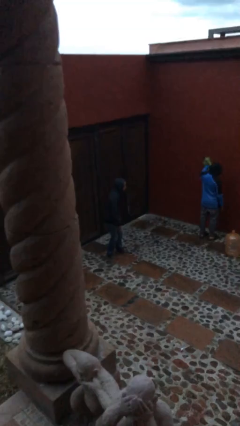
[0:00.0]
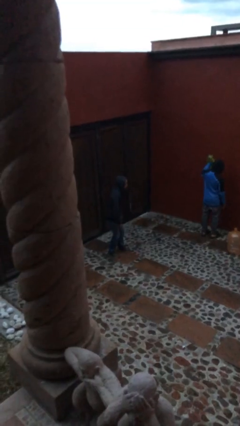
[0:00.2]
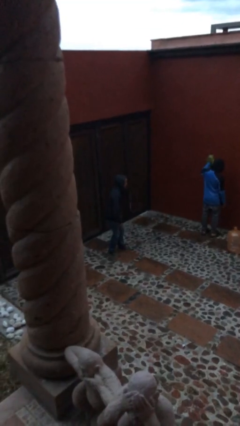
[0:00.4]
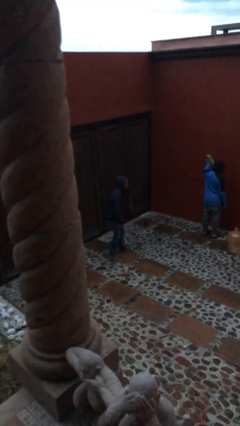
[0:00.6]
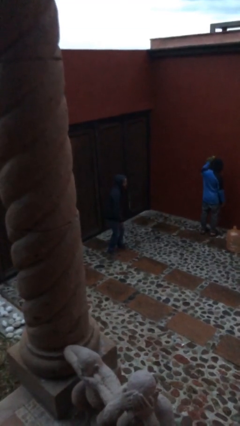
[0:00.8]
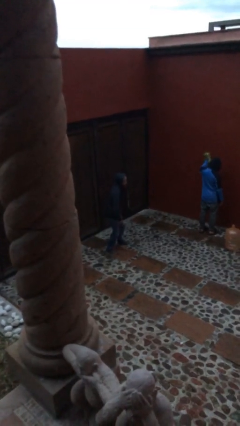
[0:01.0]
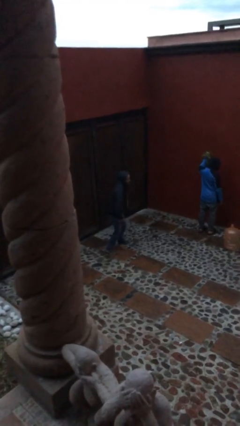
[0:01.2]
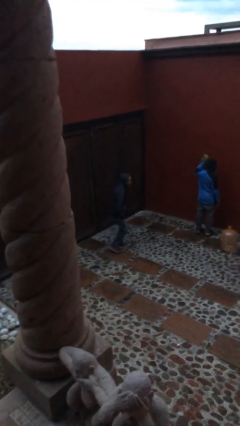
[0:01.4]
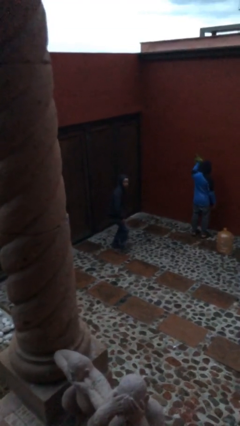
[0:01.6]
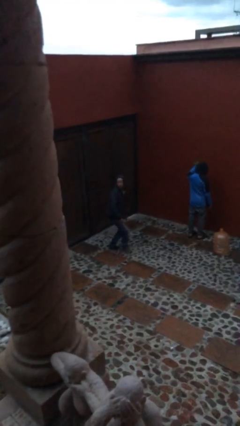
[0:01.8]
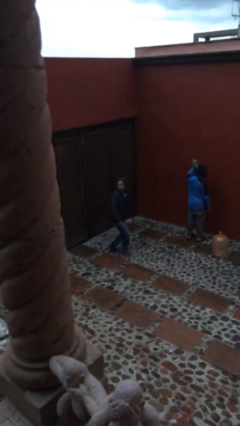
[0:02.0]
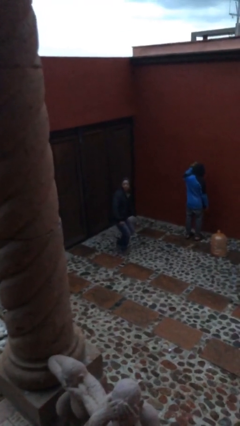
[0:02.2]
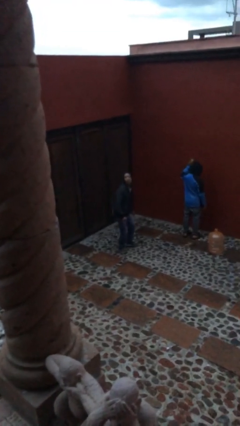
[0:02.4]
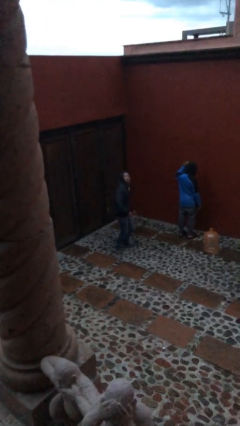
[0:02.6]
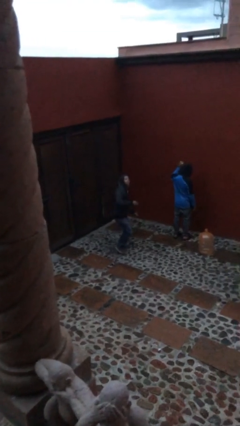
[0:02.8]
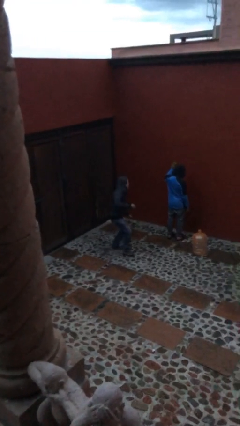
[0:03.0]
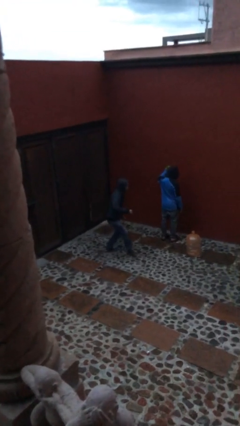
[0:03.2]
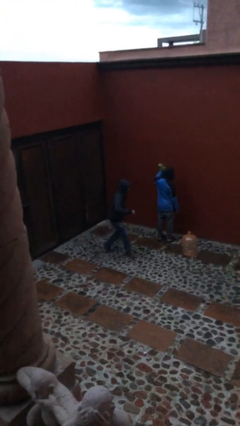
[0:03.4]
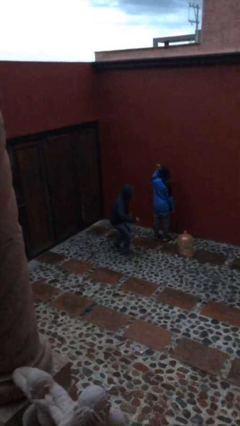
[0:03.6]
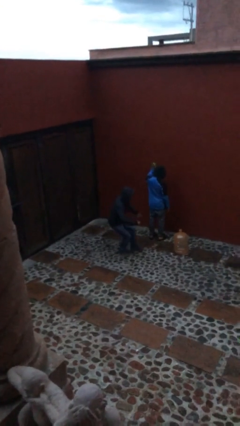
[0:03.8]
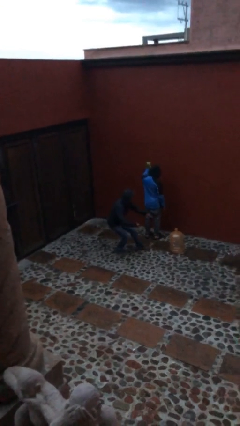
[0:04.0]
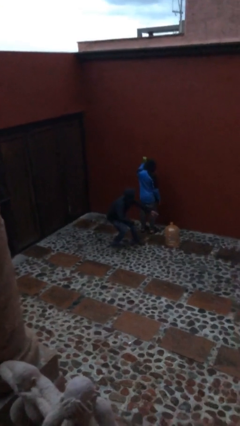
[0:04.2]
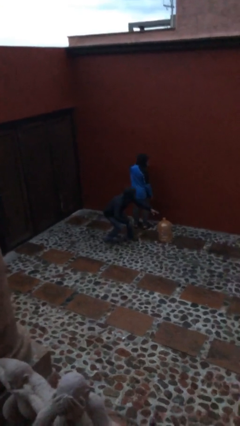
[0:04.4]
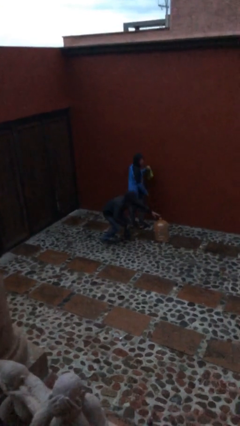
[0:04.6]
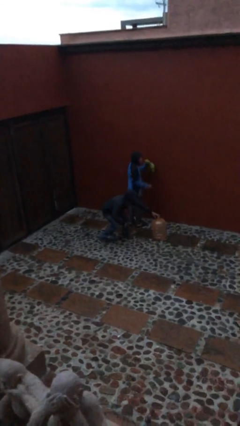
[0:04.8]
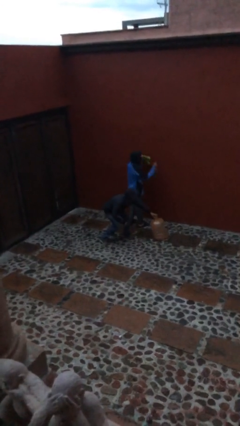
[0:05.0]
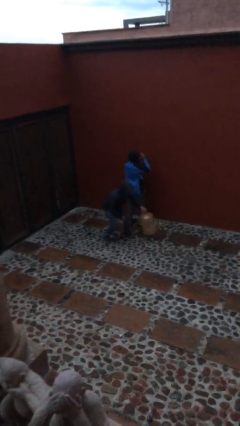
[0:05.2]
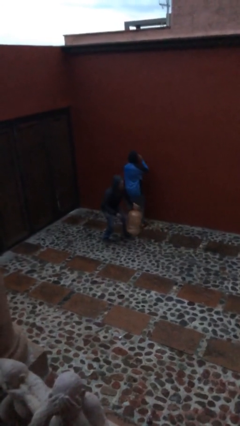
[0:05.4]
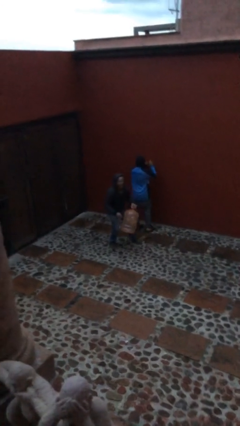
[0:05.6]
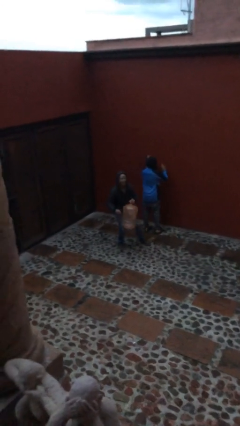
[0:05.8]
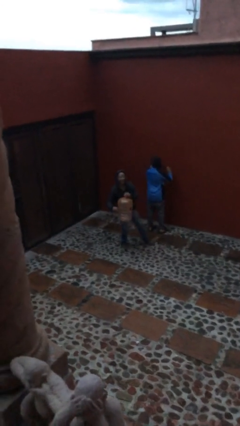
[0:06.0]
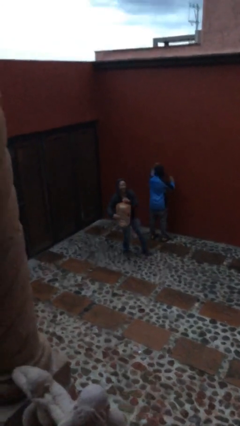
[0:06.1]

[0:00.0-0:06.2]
person steals object from person

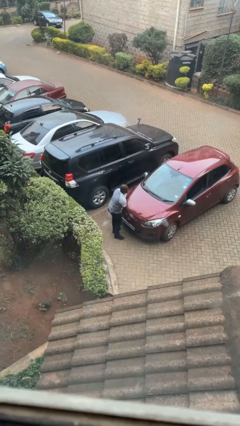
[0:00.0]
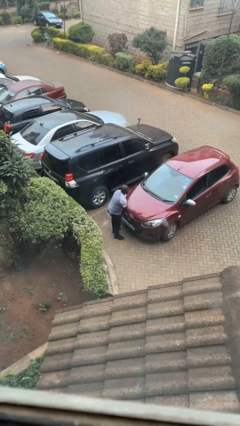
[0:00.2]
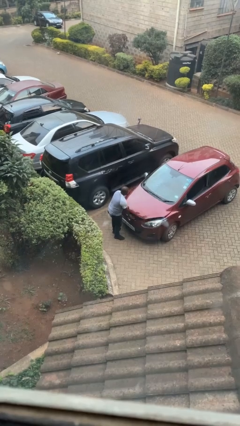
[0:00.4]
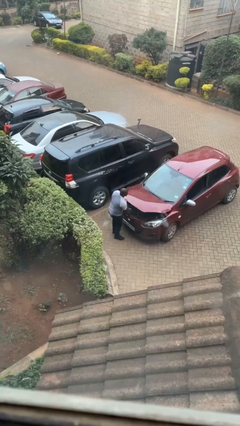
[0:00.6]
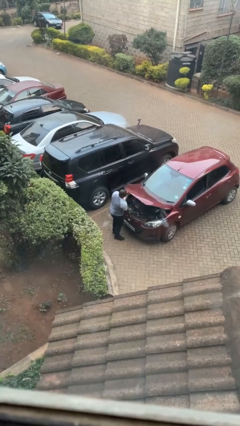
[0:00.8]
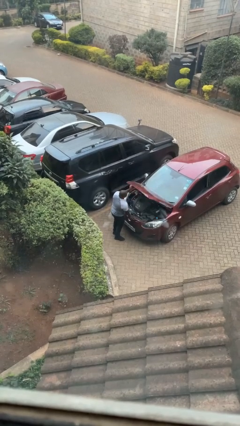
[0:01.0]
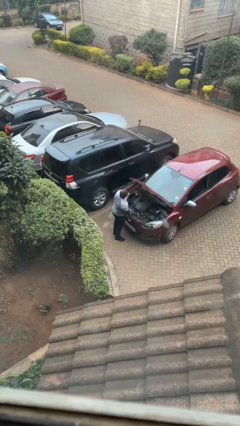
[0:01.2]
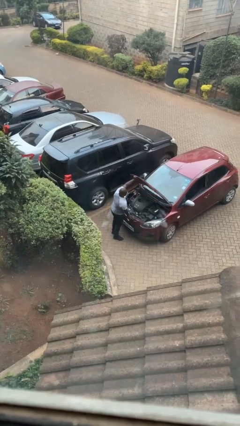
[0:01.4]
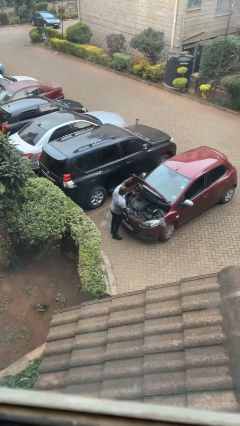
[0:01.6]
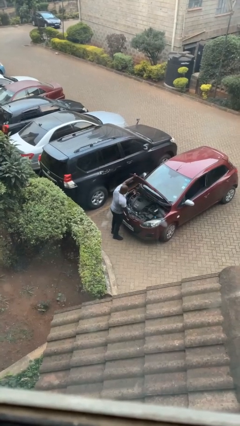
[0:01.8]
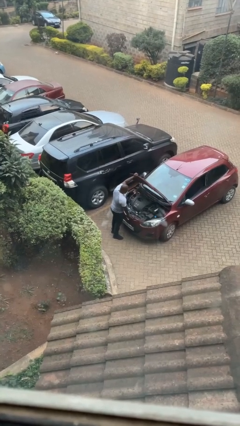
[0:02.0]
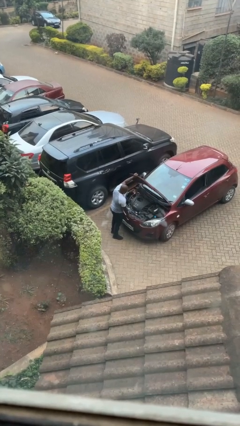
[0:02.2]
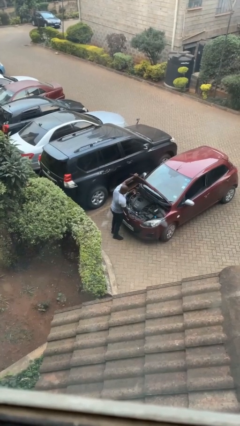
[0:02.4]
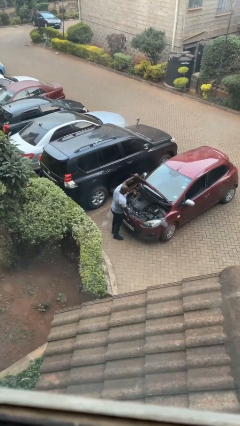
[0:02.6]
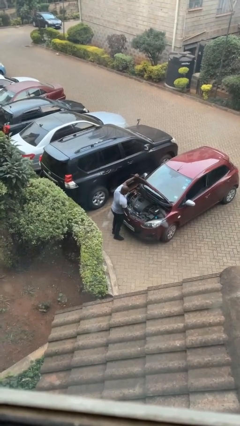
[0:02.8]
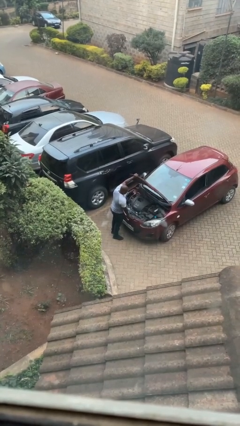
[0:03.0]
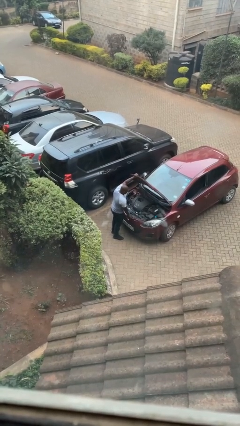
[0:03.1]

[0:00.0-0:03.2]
person opens car hood

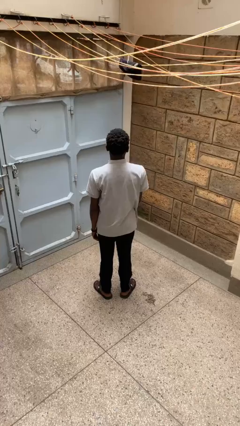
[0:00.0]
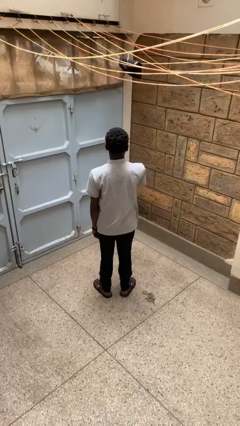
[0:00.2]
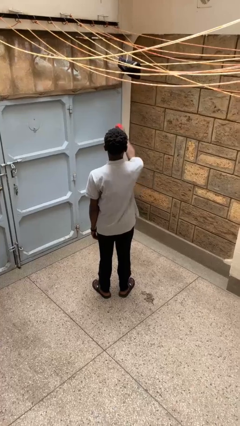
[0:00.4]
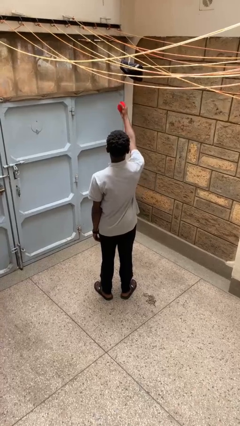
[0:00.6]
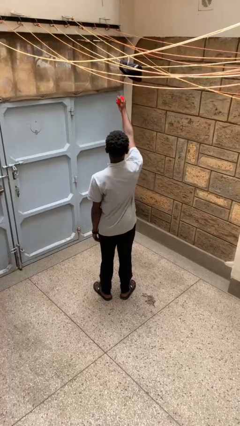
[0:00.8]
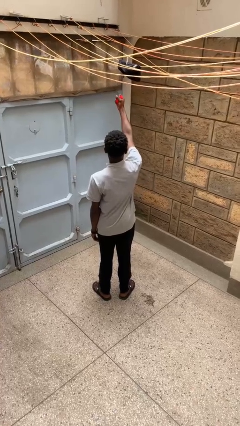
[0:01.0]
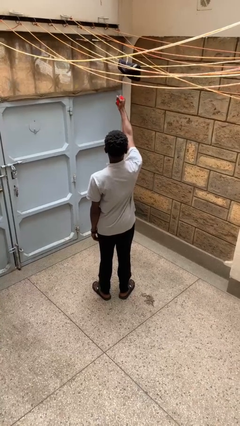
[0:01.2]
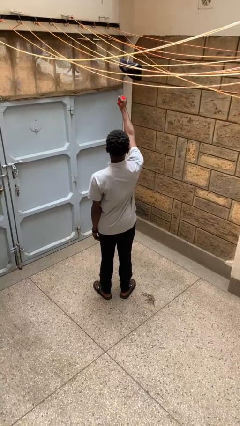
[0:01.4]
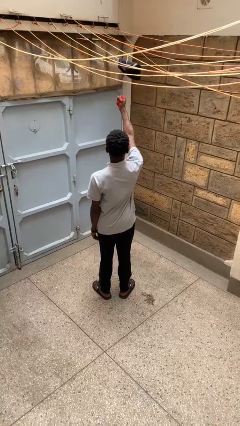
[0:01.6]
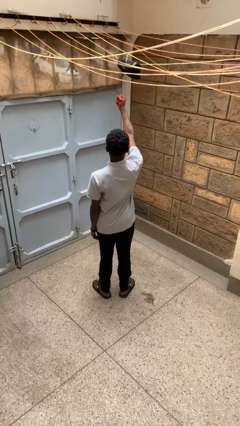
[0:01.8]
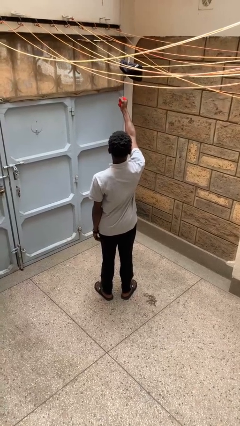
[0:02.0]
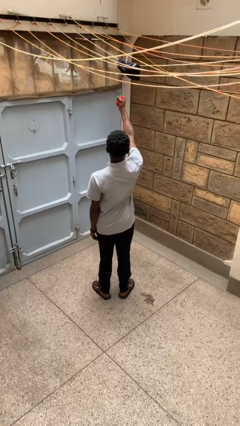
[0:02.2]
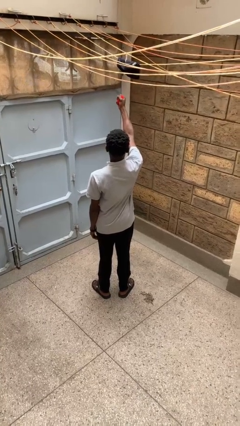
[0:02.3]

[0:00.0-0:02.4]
person squeezes object

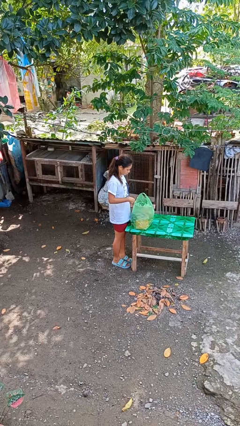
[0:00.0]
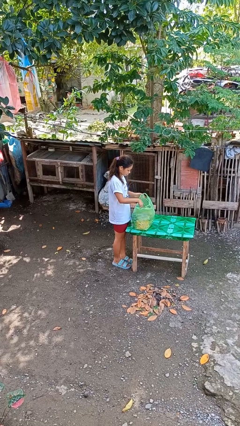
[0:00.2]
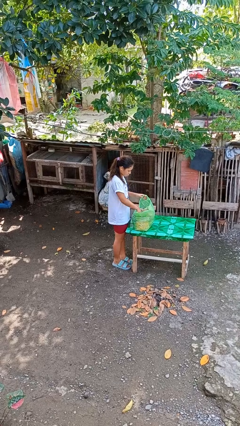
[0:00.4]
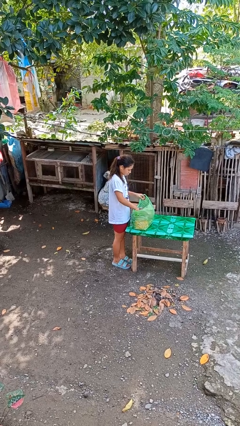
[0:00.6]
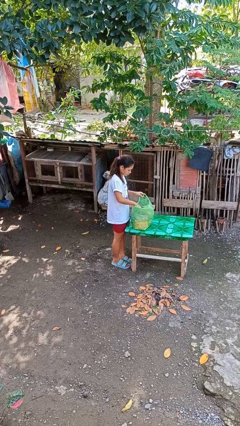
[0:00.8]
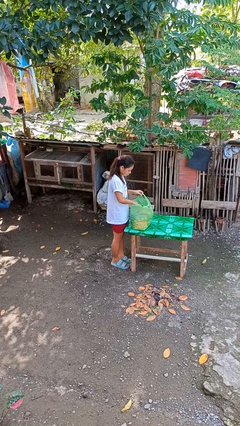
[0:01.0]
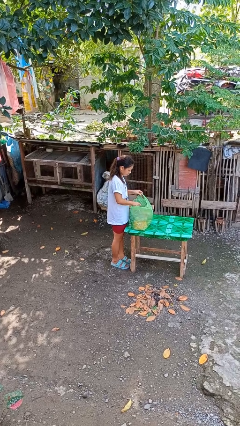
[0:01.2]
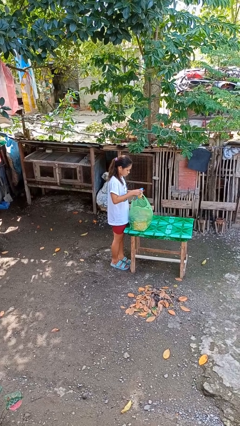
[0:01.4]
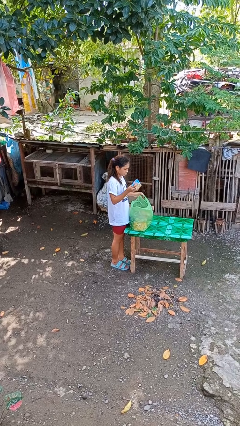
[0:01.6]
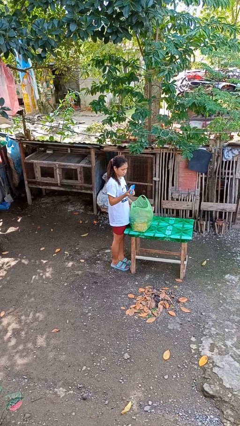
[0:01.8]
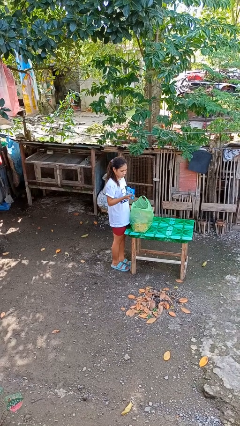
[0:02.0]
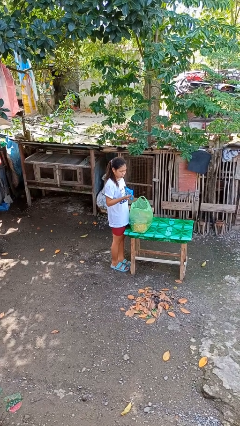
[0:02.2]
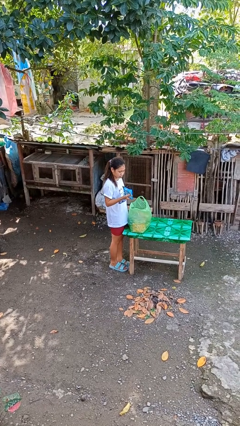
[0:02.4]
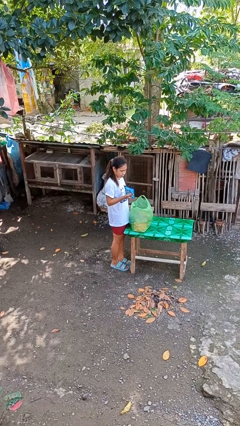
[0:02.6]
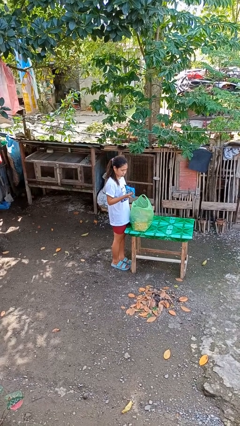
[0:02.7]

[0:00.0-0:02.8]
person takes object from bag

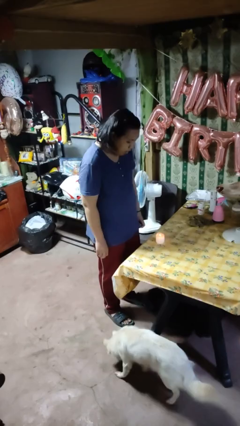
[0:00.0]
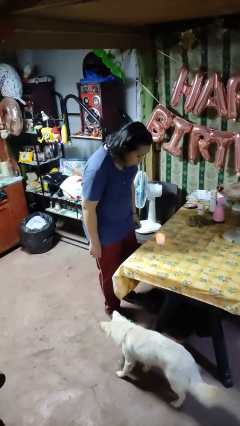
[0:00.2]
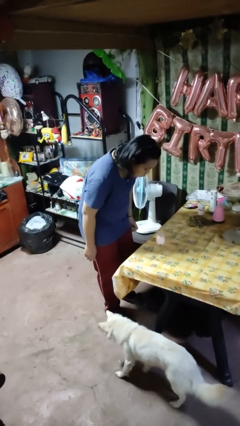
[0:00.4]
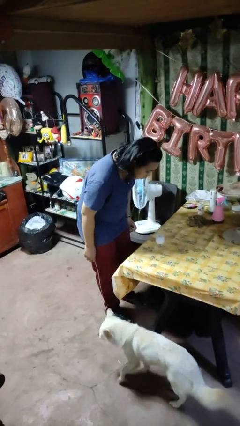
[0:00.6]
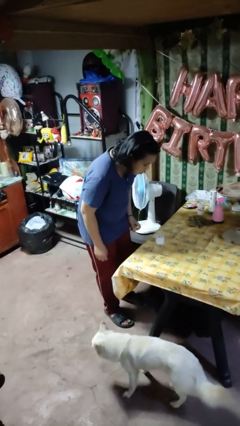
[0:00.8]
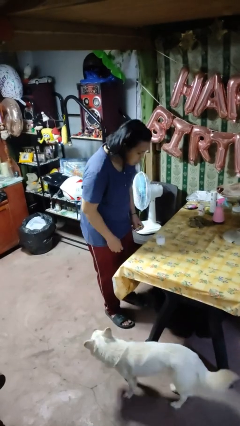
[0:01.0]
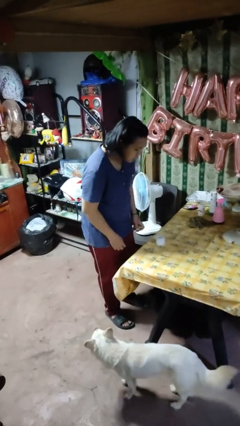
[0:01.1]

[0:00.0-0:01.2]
person extinguishes candle

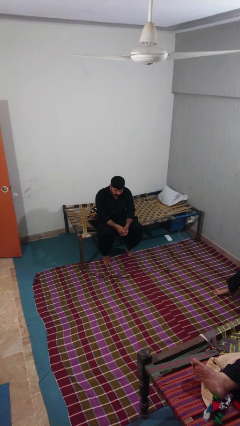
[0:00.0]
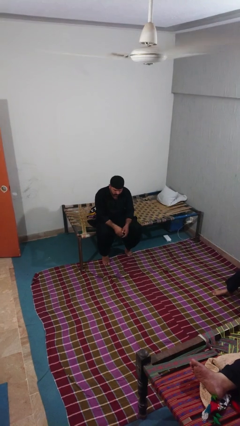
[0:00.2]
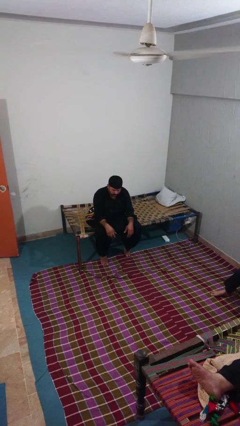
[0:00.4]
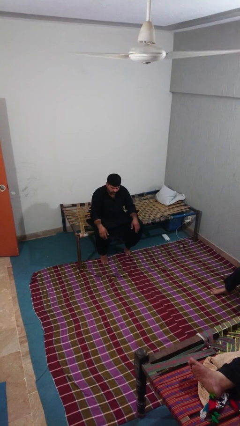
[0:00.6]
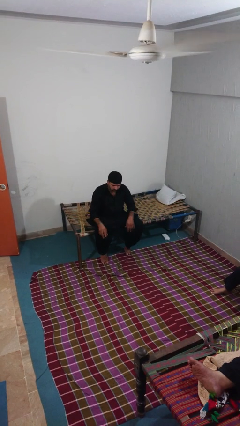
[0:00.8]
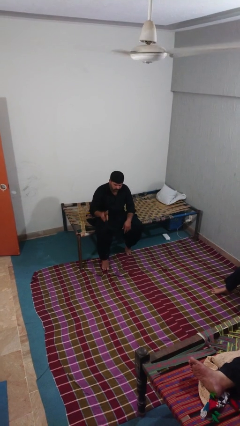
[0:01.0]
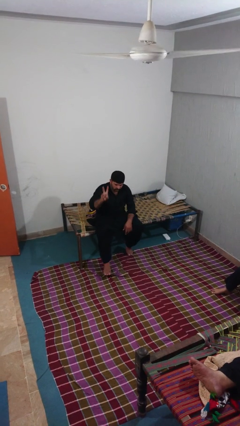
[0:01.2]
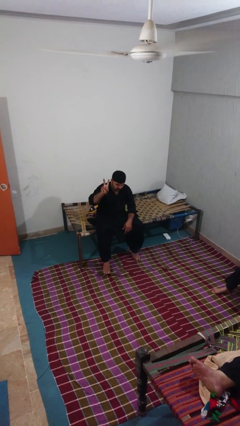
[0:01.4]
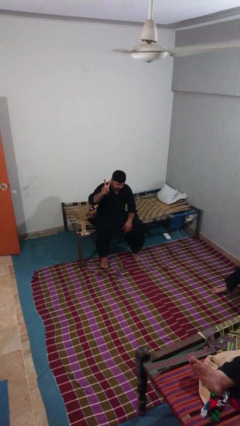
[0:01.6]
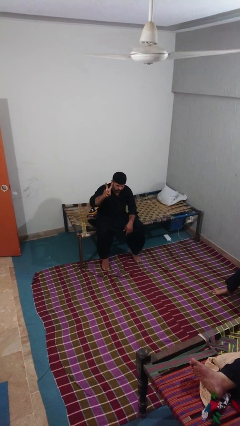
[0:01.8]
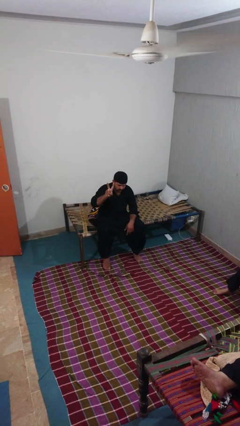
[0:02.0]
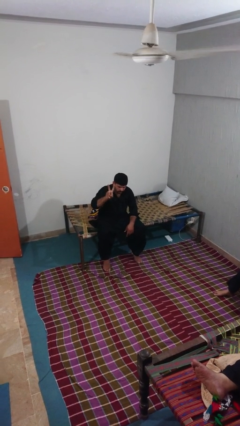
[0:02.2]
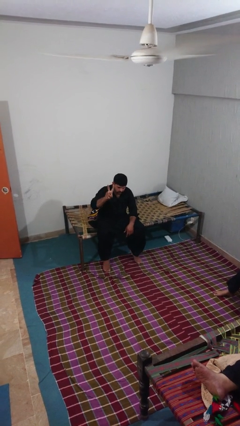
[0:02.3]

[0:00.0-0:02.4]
person gestures peace
